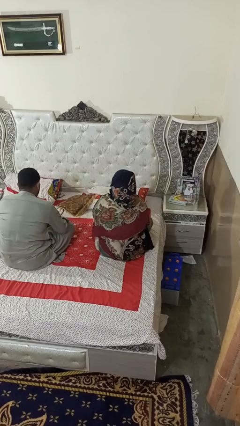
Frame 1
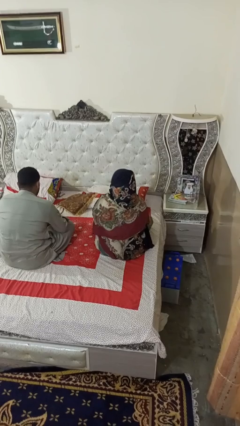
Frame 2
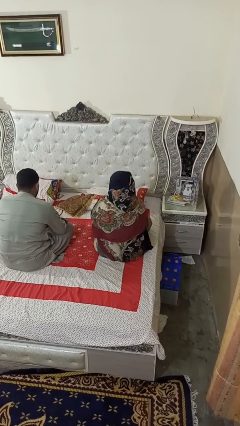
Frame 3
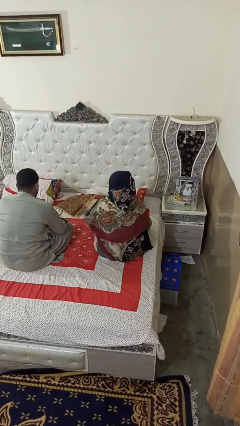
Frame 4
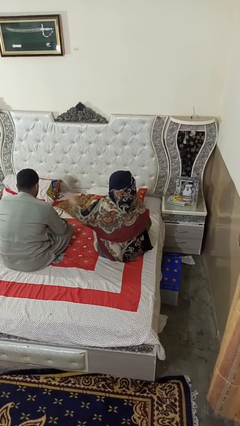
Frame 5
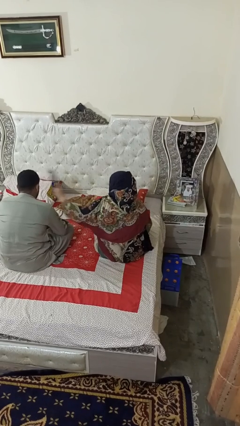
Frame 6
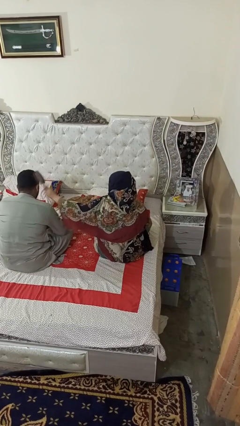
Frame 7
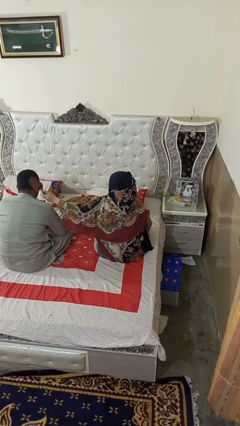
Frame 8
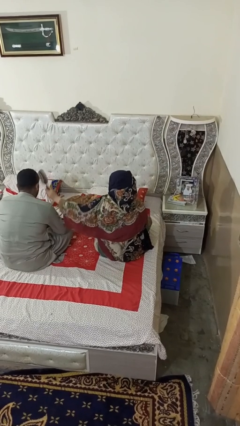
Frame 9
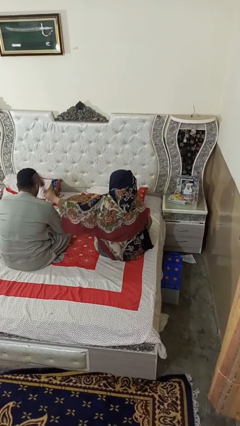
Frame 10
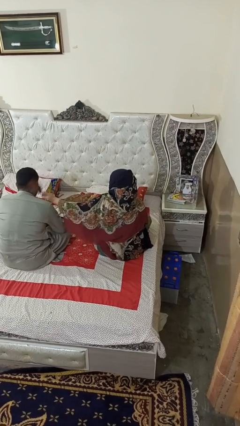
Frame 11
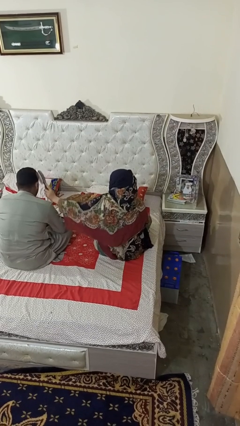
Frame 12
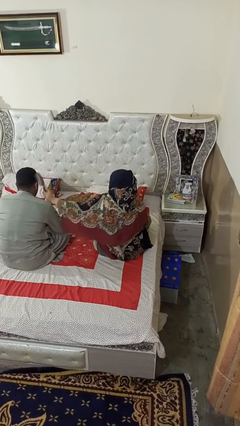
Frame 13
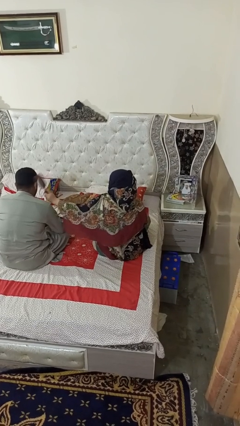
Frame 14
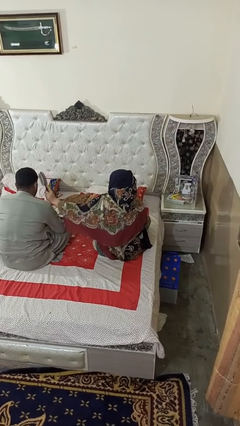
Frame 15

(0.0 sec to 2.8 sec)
person brushes hair of person

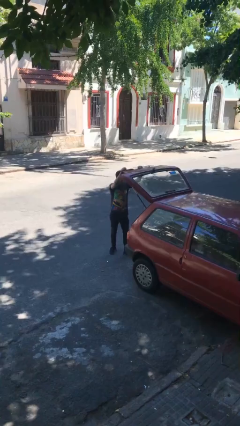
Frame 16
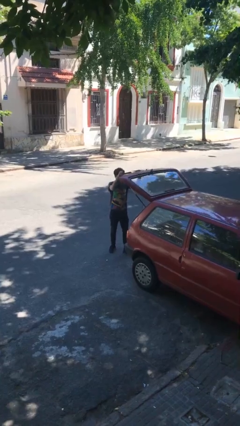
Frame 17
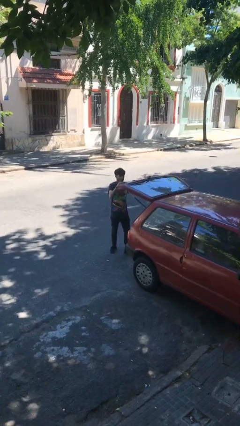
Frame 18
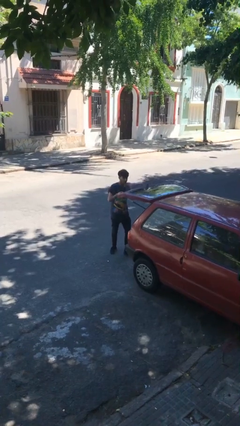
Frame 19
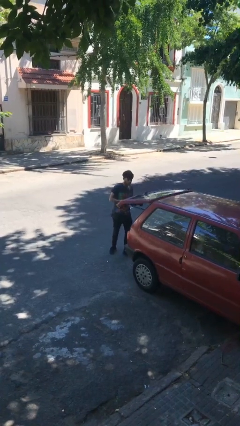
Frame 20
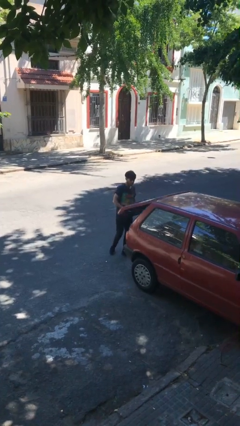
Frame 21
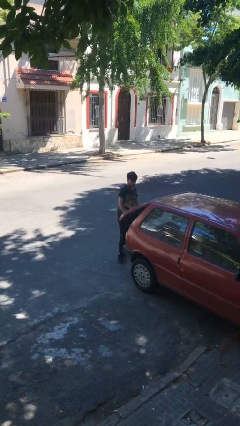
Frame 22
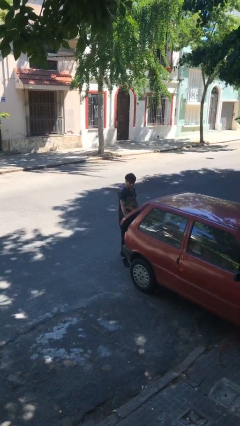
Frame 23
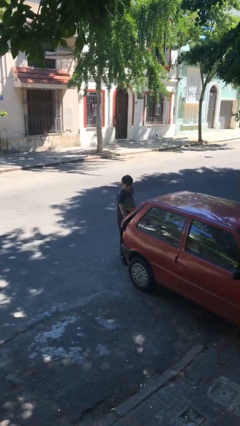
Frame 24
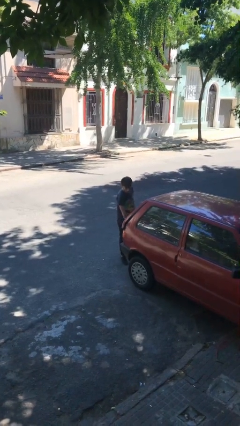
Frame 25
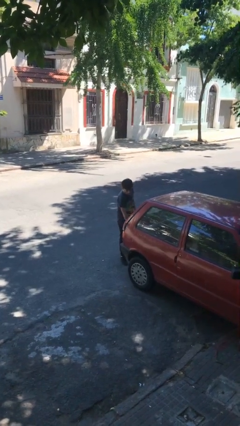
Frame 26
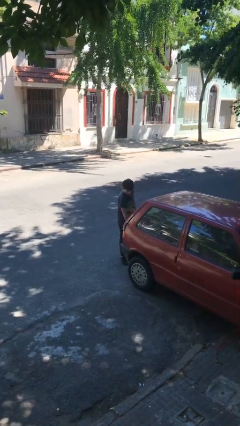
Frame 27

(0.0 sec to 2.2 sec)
person closes car trunk

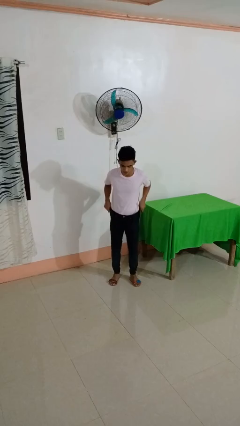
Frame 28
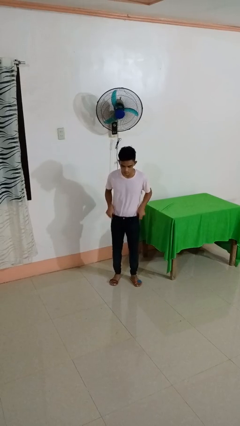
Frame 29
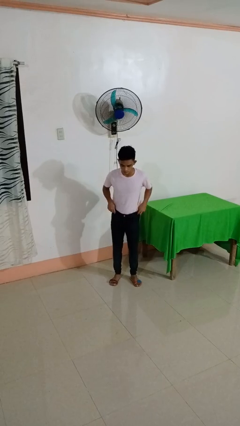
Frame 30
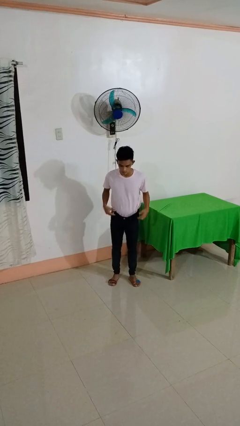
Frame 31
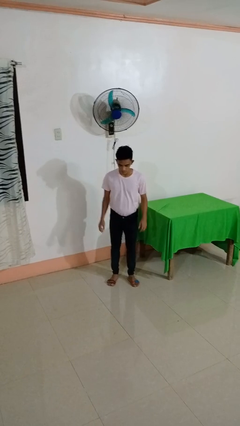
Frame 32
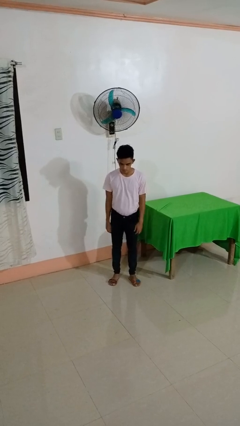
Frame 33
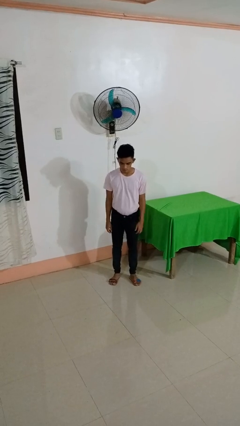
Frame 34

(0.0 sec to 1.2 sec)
person hikes up pants

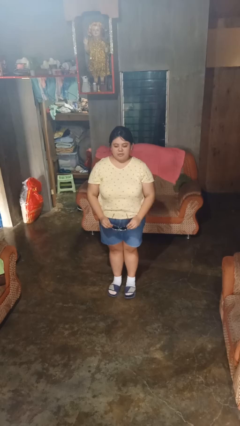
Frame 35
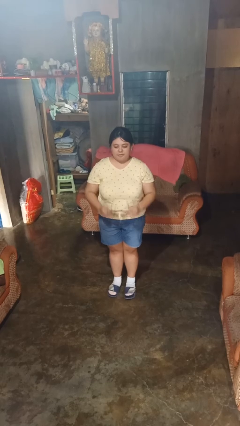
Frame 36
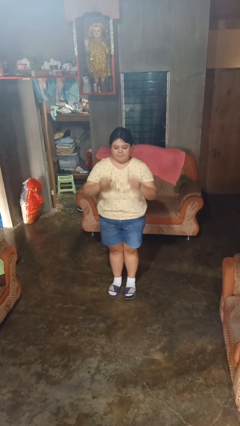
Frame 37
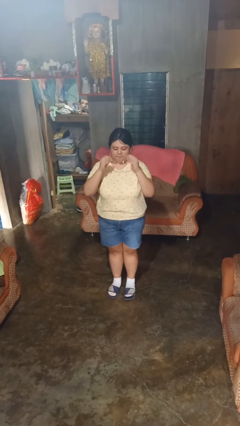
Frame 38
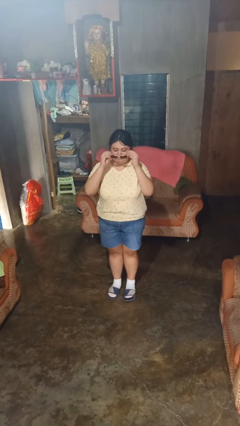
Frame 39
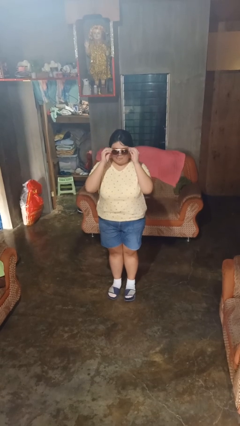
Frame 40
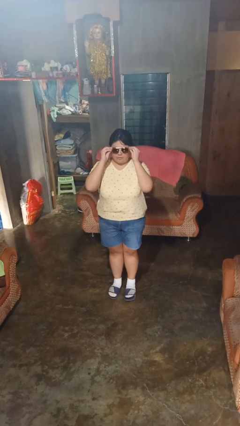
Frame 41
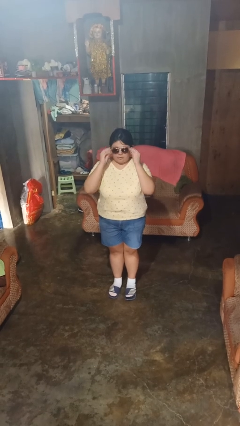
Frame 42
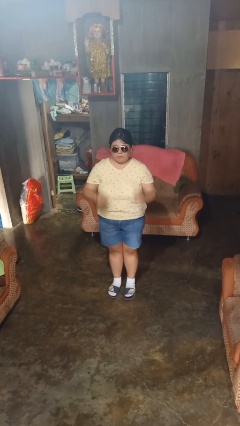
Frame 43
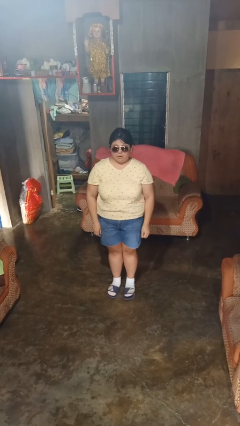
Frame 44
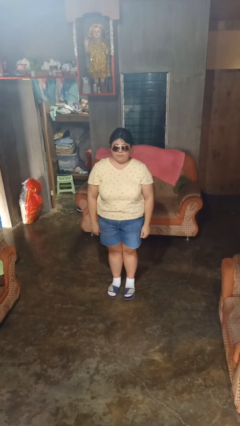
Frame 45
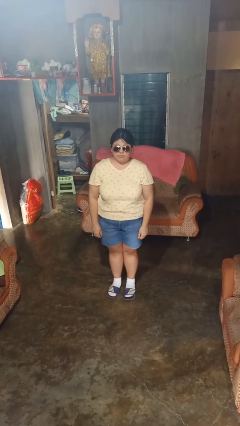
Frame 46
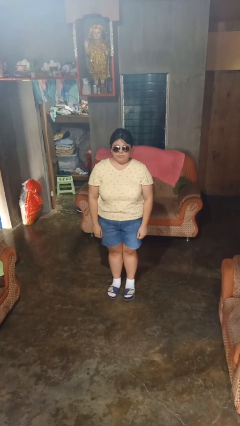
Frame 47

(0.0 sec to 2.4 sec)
person puts on sunglasses

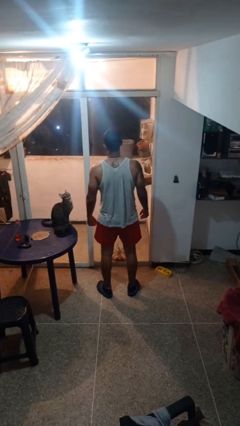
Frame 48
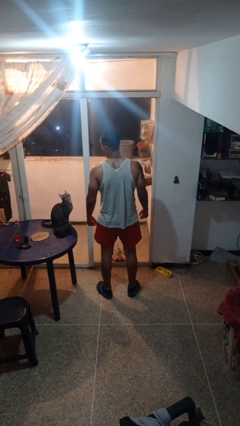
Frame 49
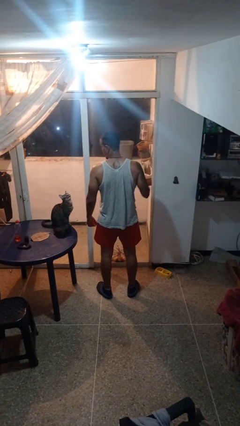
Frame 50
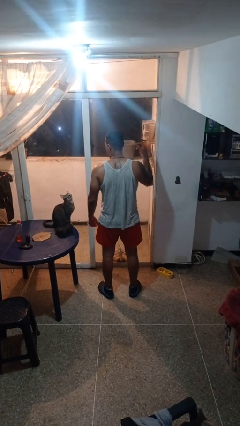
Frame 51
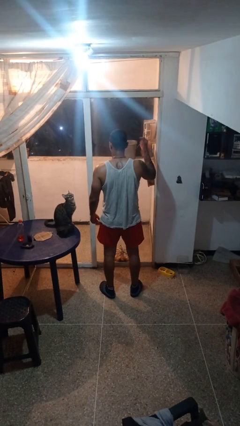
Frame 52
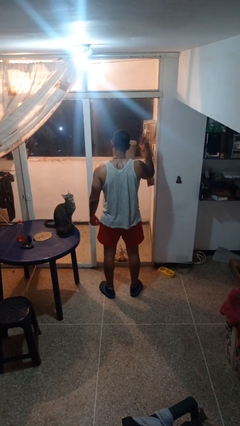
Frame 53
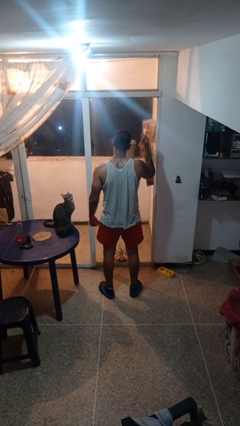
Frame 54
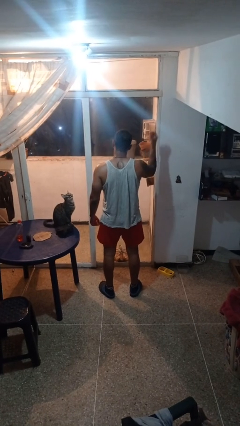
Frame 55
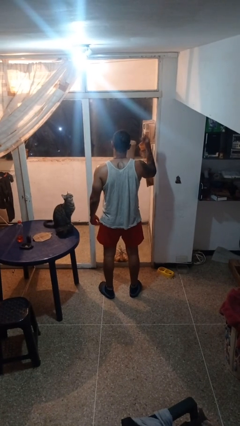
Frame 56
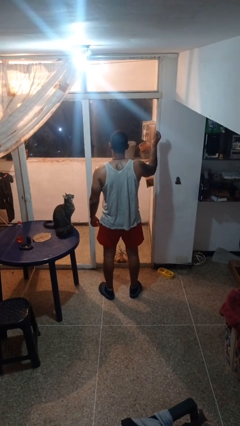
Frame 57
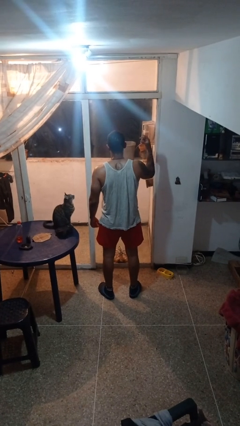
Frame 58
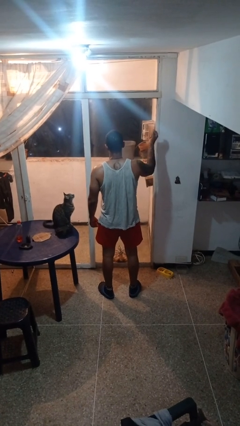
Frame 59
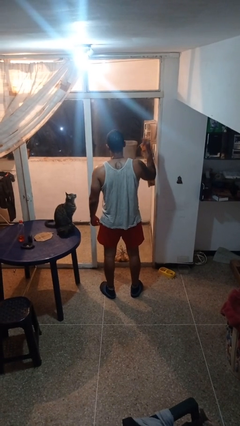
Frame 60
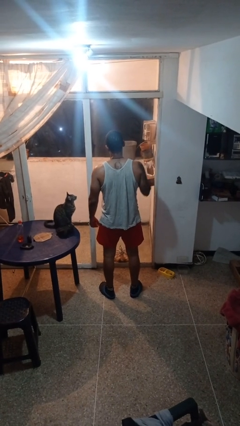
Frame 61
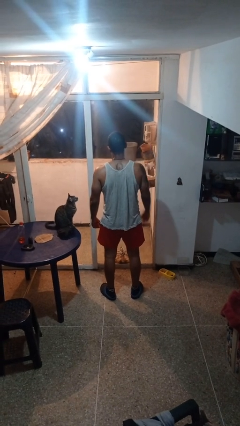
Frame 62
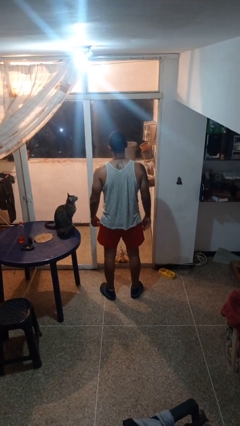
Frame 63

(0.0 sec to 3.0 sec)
person snaps fingers

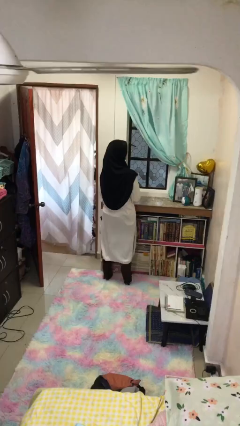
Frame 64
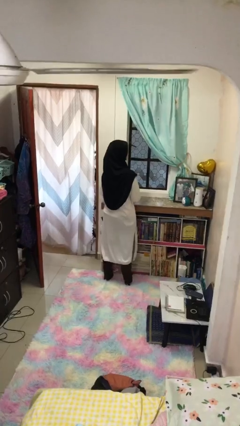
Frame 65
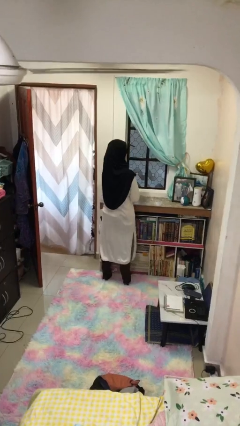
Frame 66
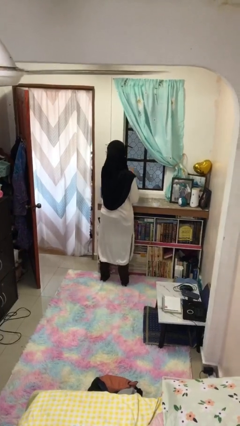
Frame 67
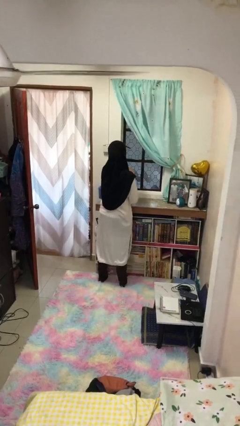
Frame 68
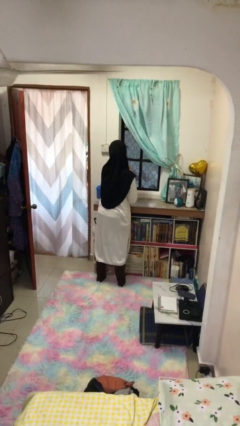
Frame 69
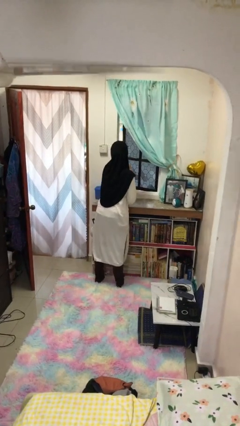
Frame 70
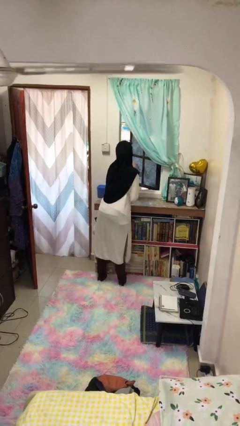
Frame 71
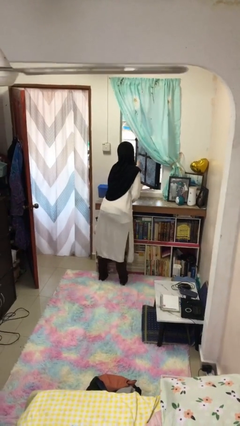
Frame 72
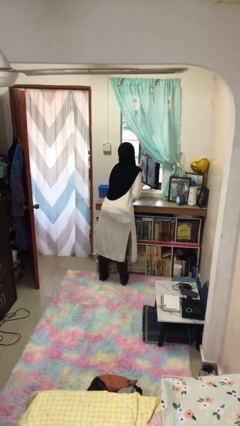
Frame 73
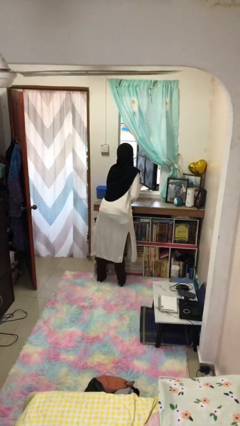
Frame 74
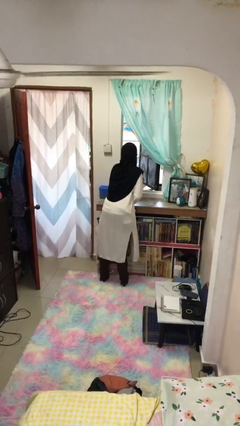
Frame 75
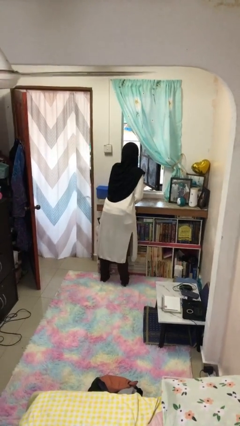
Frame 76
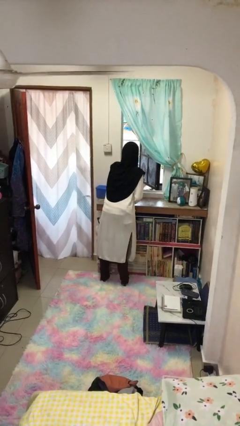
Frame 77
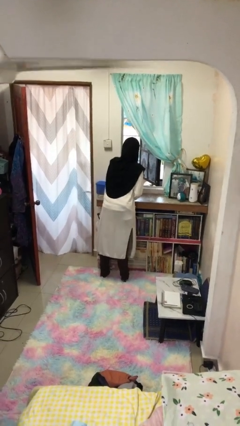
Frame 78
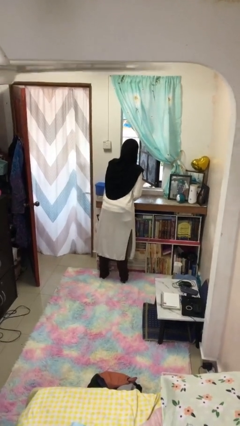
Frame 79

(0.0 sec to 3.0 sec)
person opens home window

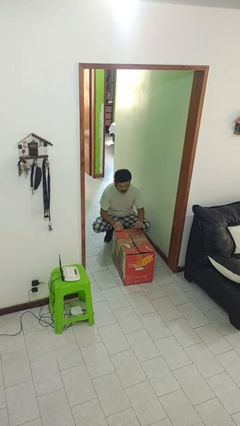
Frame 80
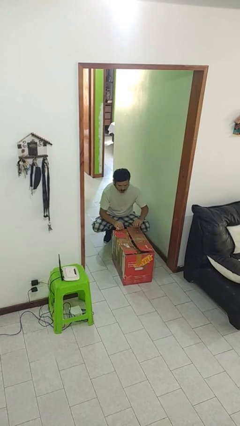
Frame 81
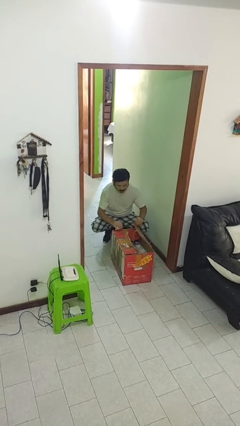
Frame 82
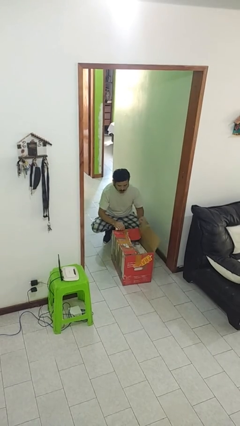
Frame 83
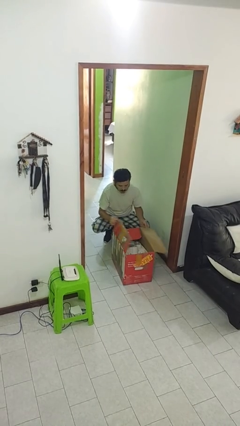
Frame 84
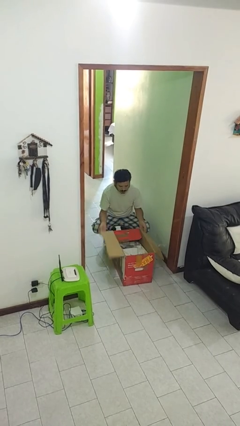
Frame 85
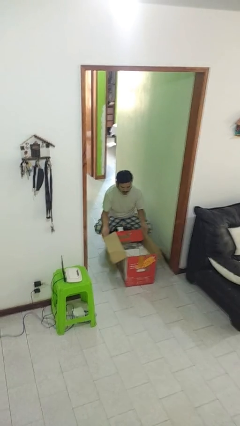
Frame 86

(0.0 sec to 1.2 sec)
person opens box

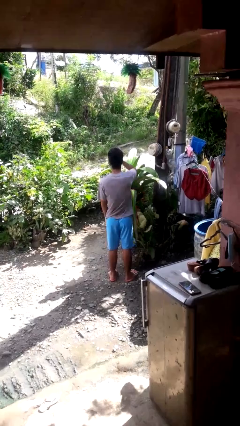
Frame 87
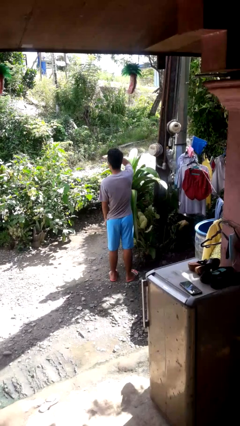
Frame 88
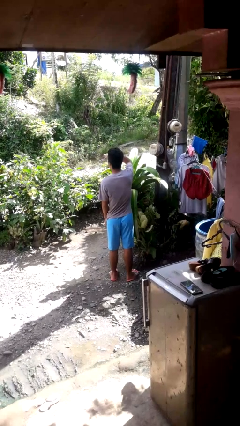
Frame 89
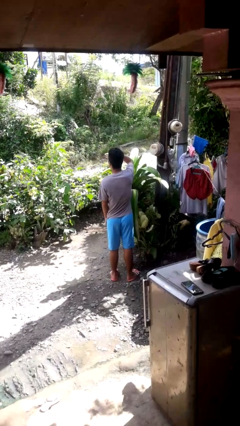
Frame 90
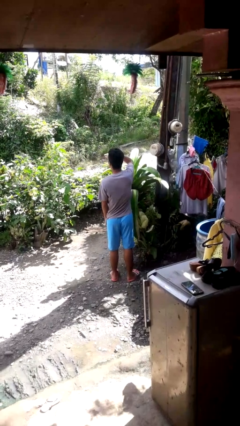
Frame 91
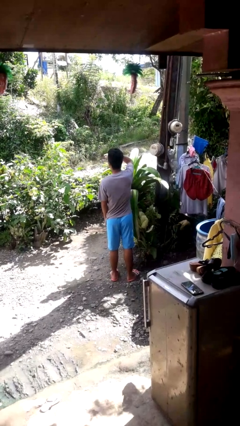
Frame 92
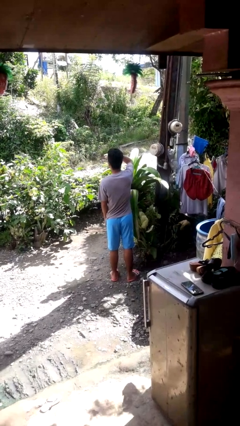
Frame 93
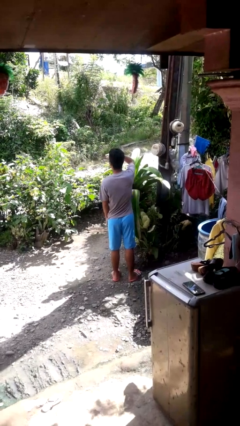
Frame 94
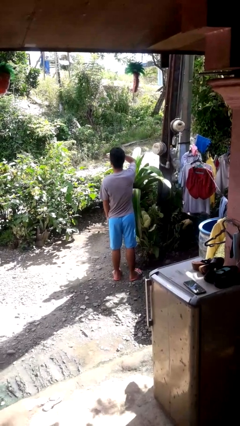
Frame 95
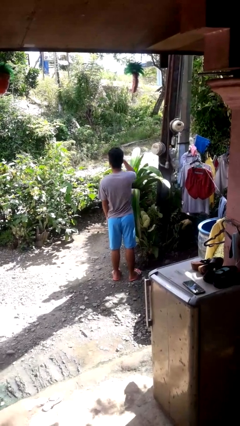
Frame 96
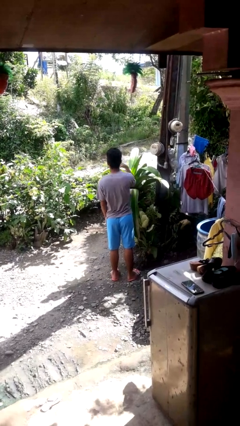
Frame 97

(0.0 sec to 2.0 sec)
person shades eyes
